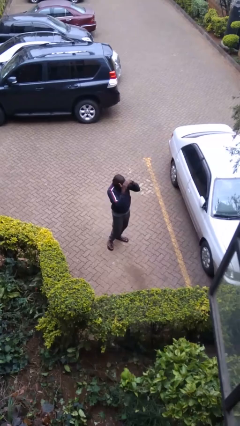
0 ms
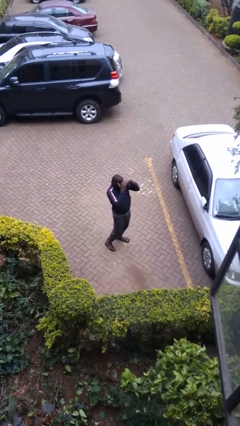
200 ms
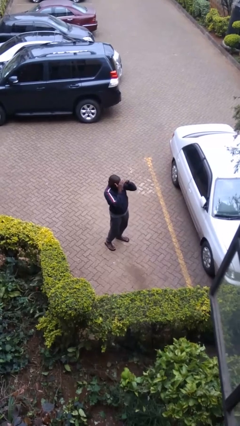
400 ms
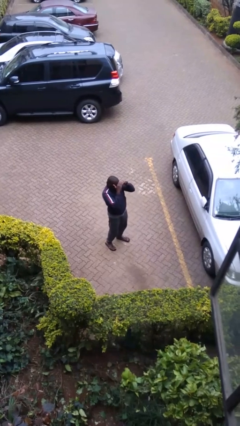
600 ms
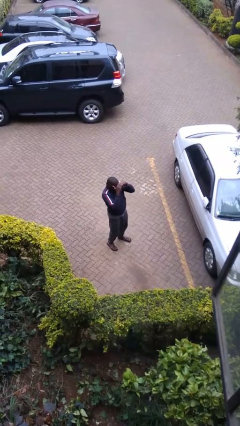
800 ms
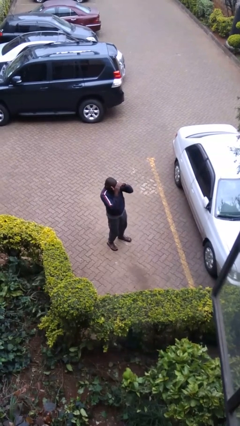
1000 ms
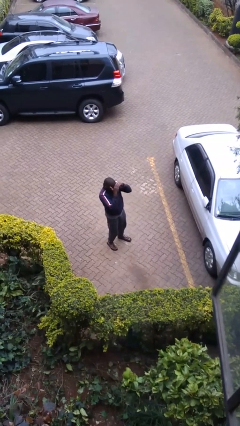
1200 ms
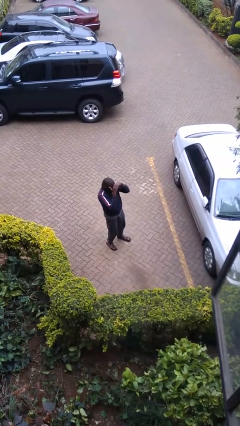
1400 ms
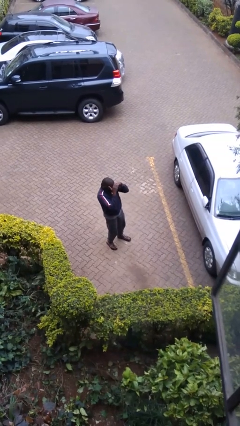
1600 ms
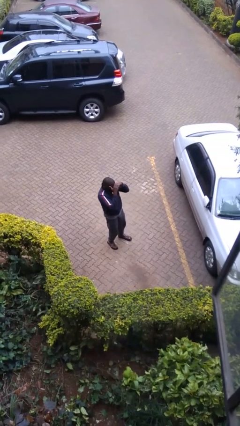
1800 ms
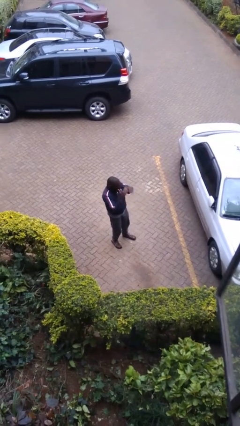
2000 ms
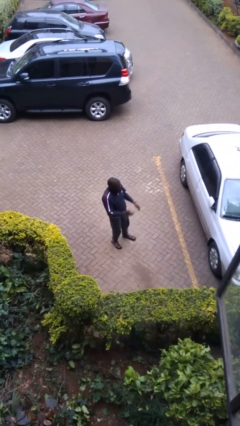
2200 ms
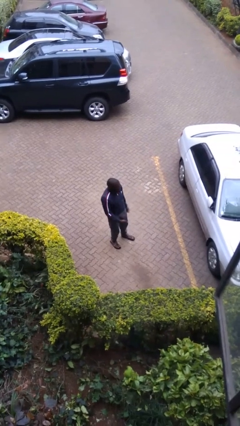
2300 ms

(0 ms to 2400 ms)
person shades eyes

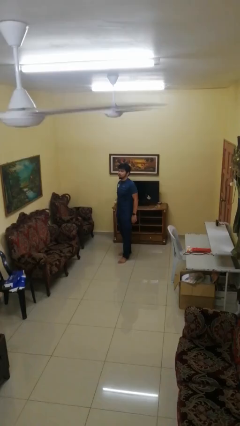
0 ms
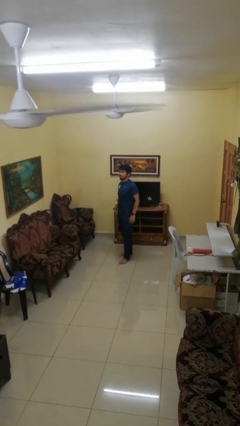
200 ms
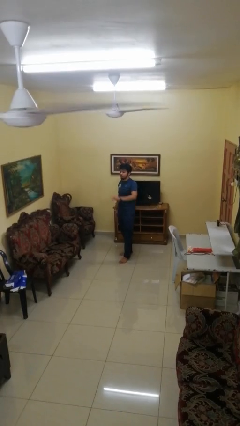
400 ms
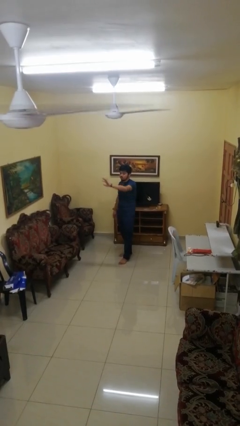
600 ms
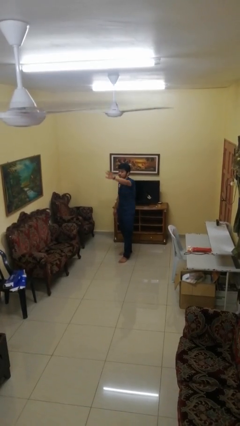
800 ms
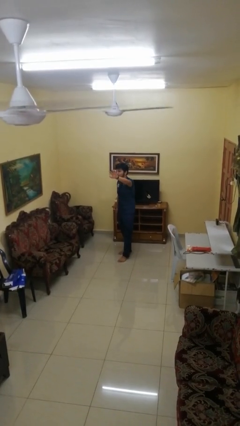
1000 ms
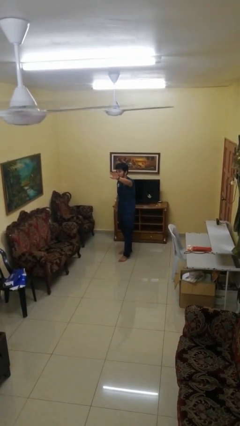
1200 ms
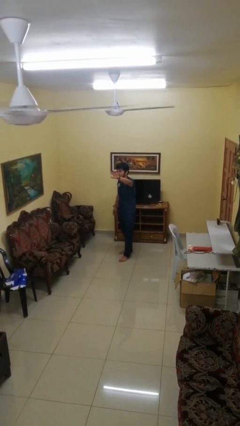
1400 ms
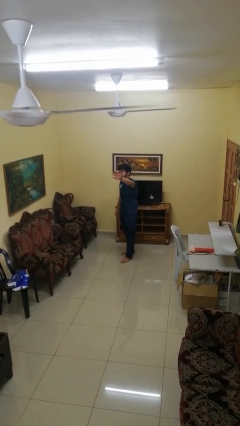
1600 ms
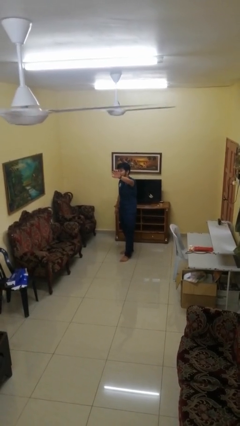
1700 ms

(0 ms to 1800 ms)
person gestures swipe left

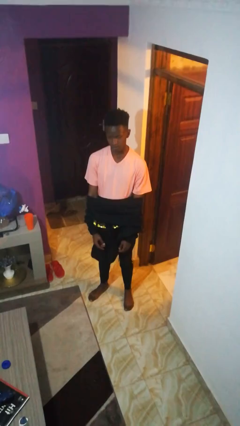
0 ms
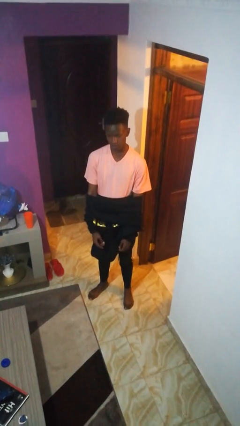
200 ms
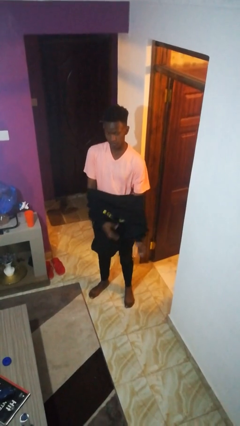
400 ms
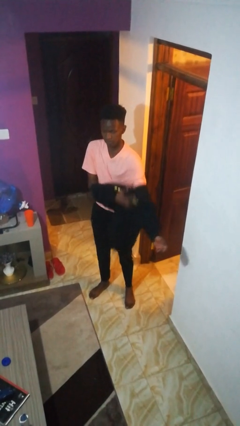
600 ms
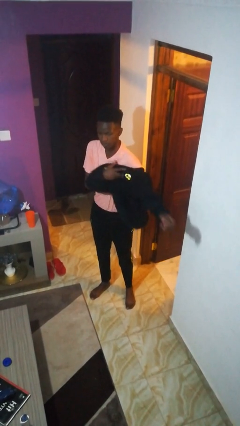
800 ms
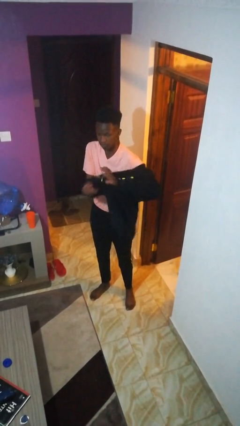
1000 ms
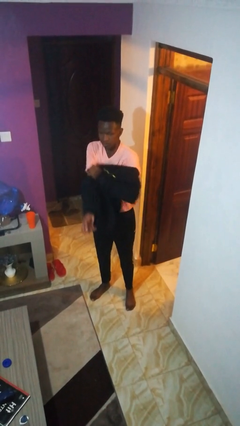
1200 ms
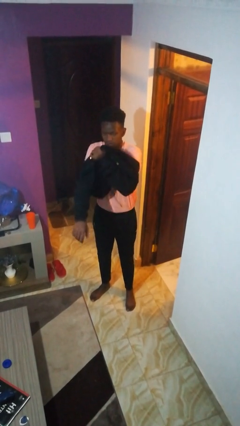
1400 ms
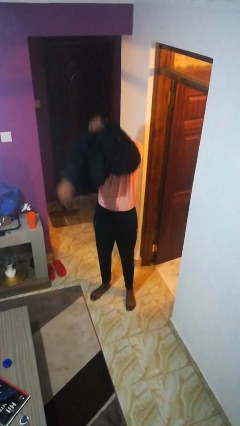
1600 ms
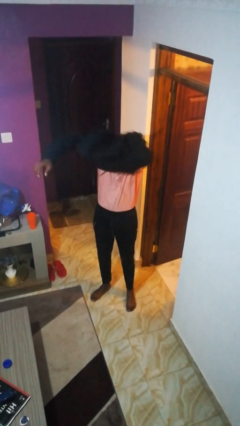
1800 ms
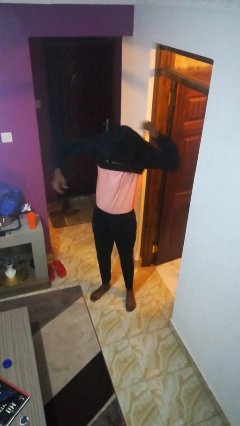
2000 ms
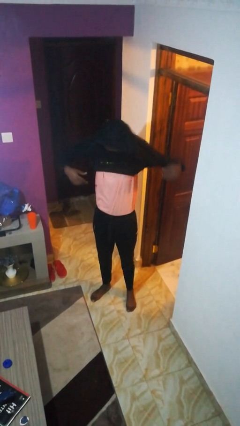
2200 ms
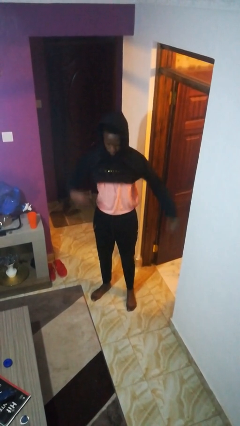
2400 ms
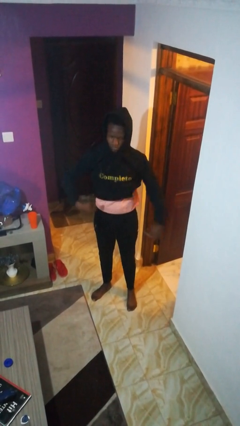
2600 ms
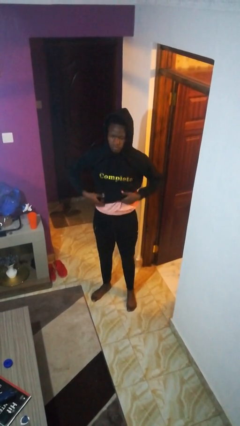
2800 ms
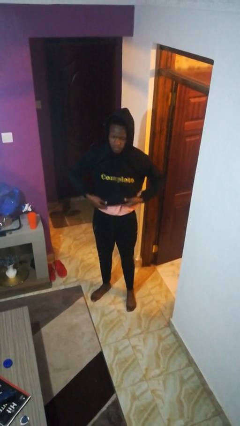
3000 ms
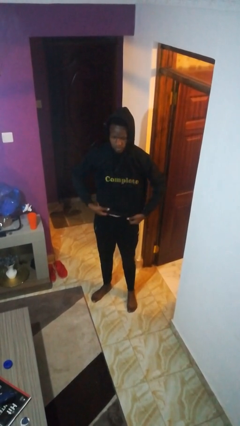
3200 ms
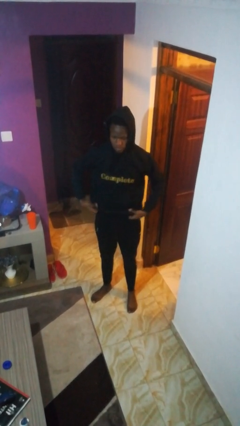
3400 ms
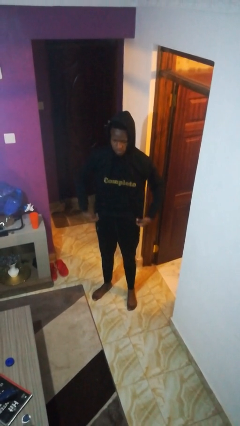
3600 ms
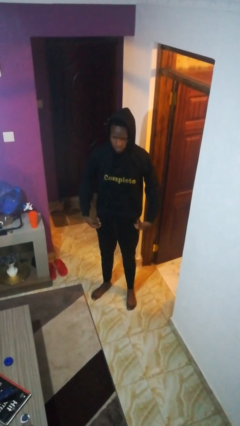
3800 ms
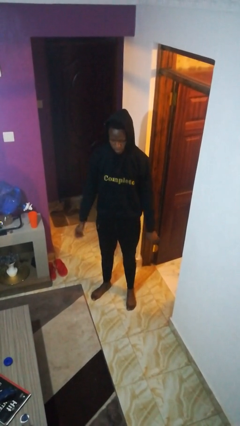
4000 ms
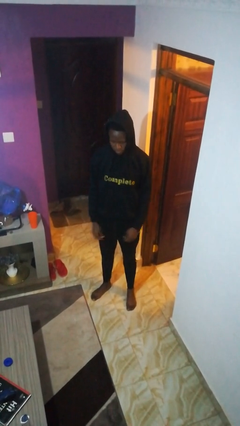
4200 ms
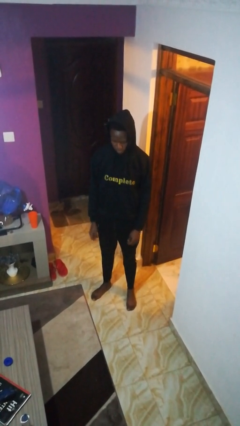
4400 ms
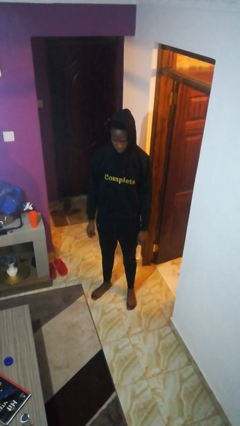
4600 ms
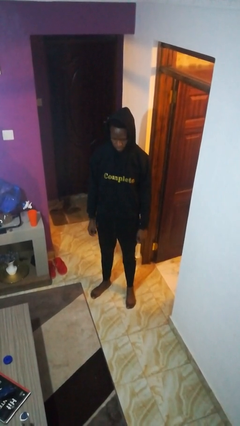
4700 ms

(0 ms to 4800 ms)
person puts on hoodie

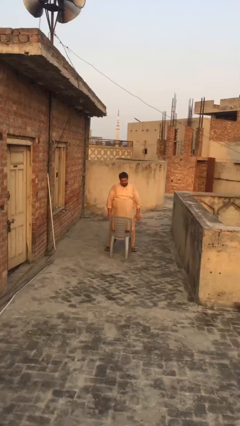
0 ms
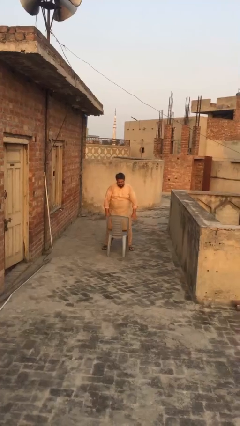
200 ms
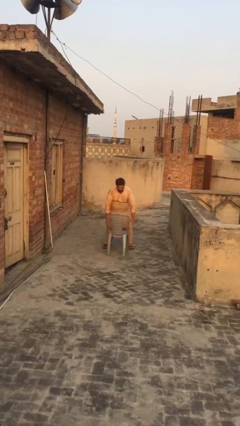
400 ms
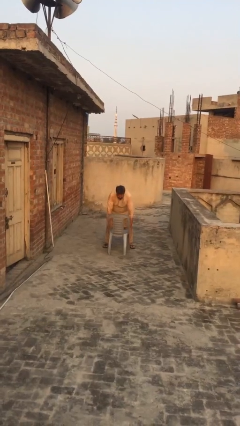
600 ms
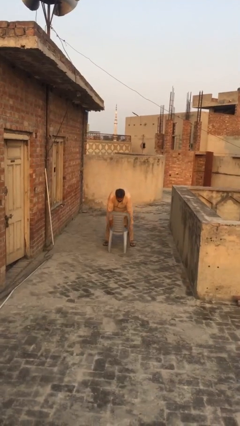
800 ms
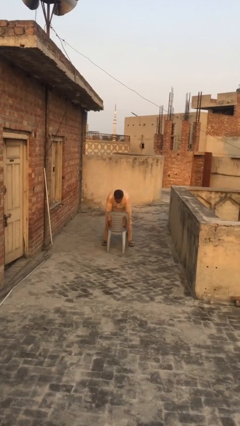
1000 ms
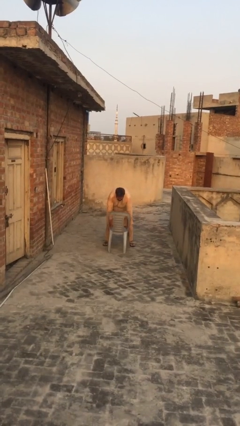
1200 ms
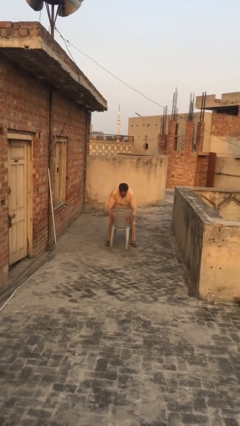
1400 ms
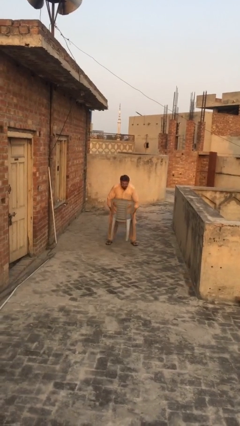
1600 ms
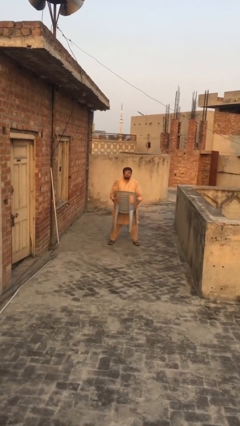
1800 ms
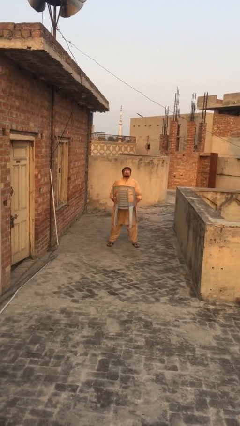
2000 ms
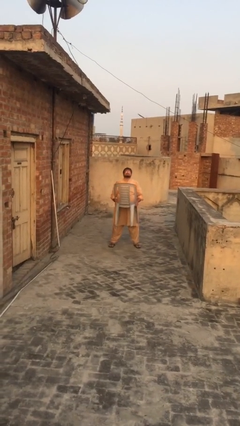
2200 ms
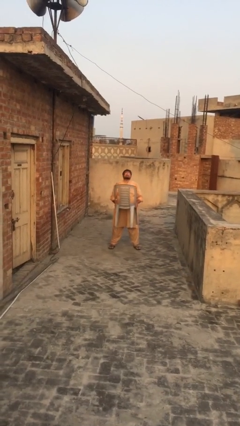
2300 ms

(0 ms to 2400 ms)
person picks up object from floor

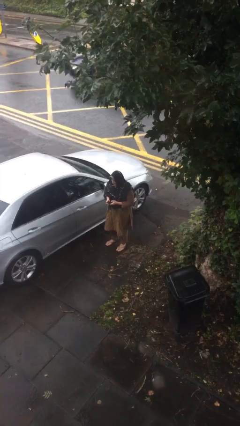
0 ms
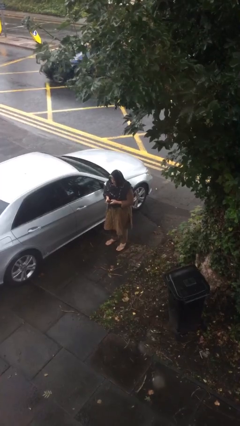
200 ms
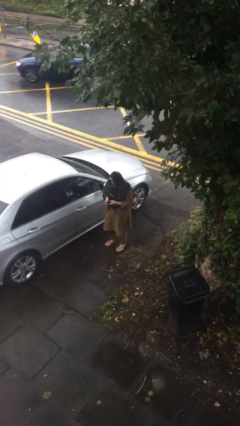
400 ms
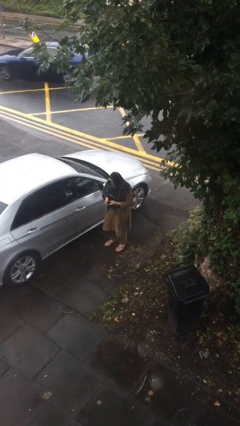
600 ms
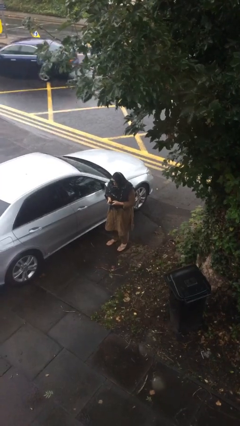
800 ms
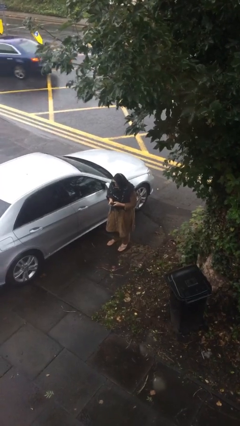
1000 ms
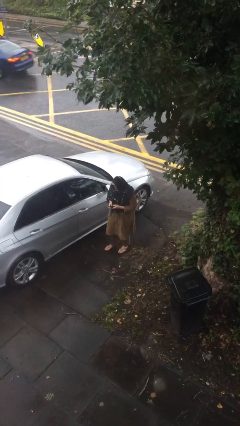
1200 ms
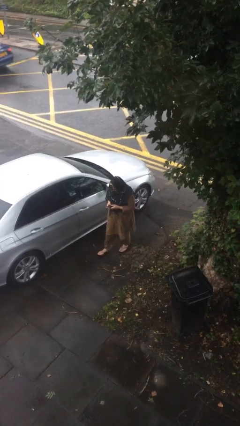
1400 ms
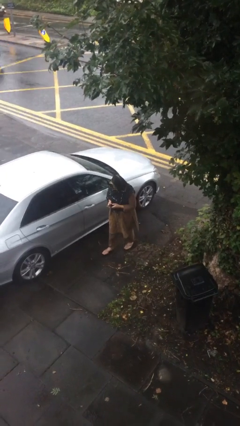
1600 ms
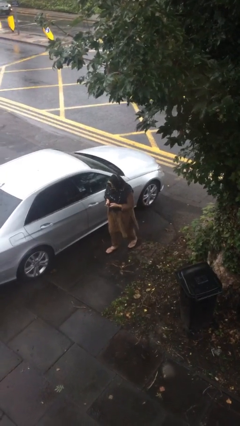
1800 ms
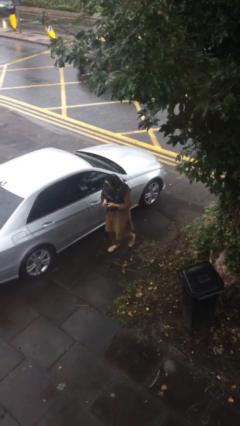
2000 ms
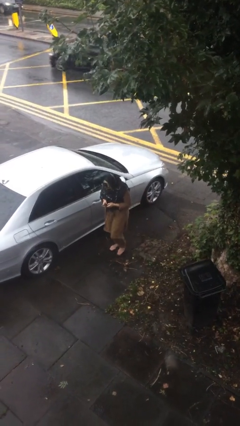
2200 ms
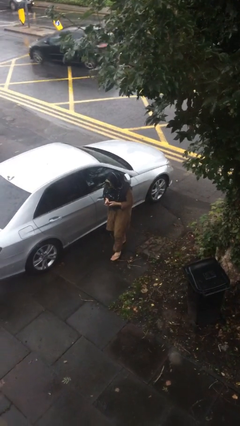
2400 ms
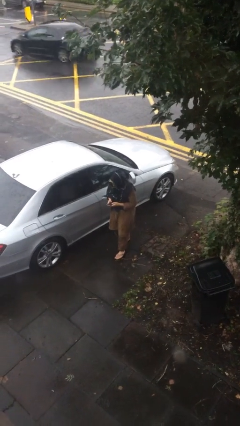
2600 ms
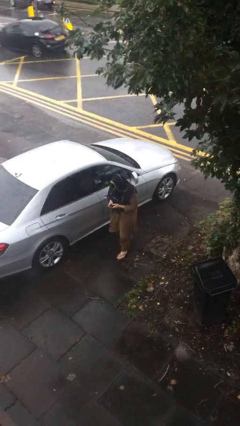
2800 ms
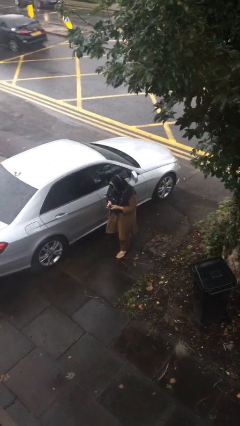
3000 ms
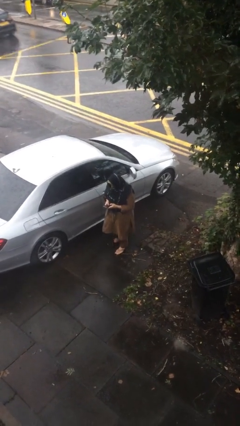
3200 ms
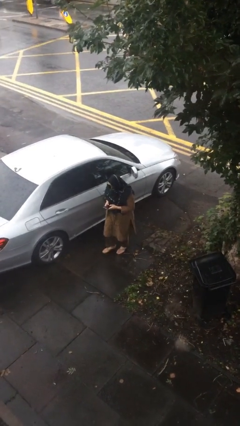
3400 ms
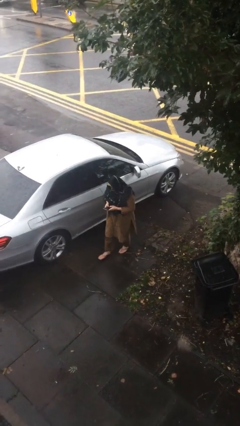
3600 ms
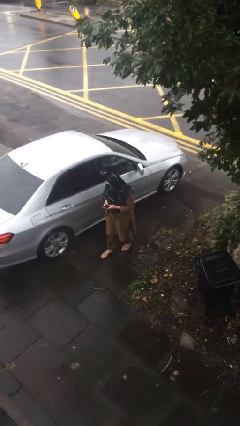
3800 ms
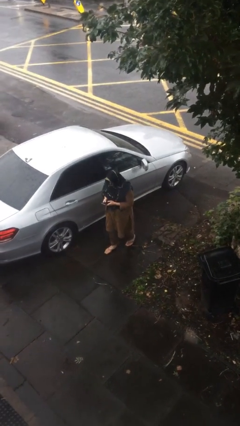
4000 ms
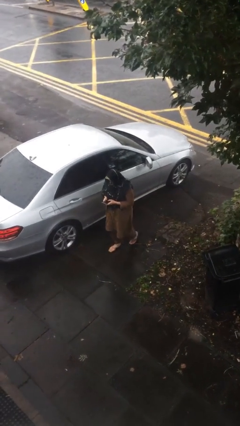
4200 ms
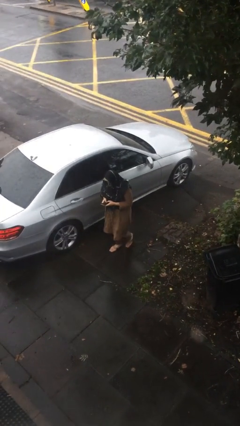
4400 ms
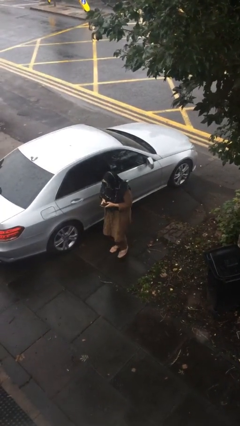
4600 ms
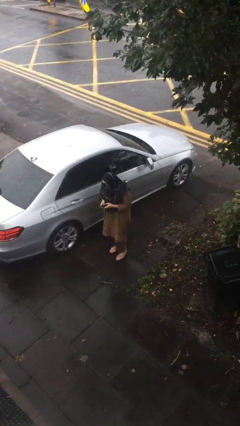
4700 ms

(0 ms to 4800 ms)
person texts on phone

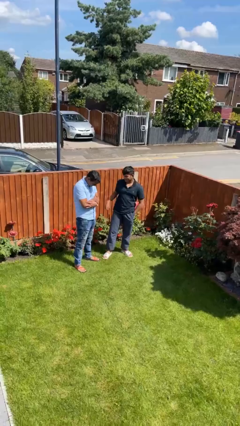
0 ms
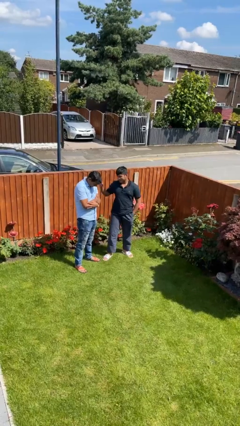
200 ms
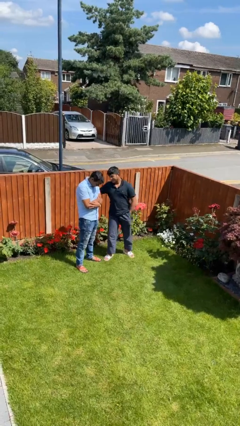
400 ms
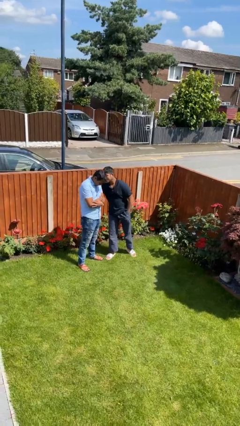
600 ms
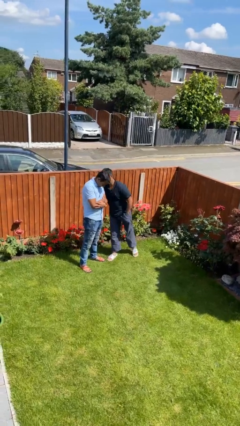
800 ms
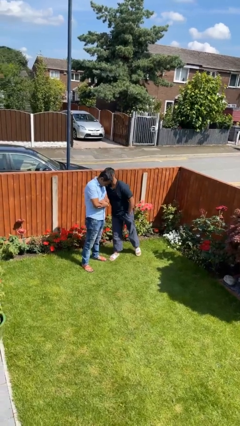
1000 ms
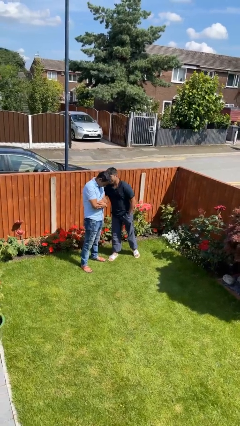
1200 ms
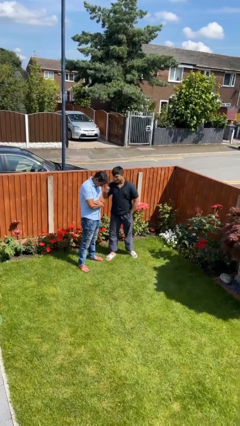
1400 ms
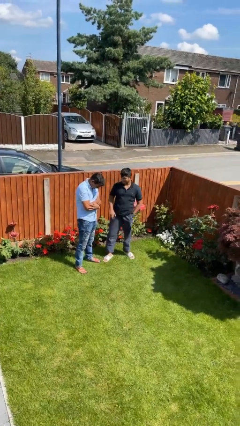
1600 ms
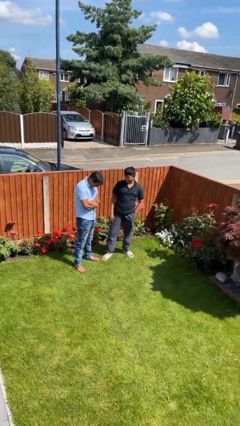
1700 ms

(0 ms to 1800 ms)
person kisses cheek of person
